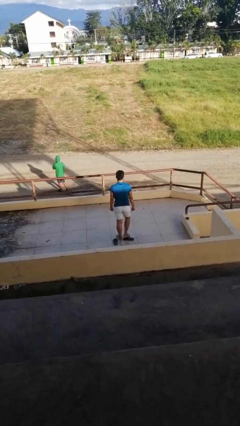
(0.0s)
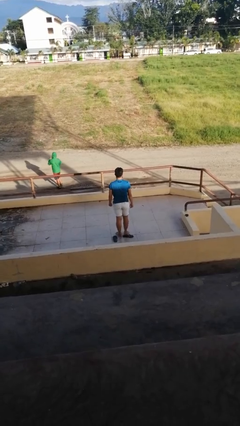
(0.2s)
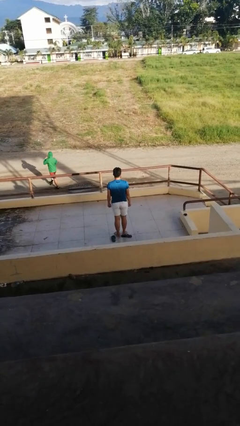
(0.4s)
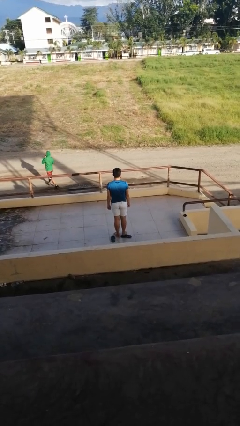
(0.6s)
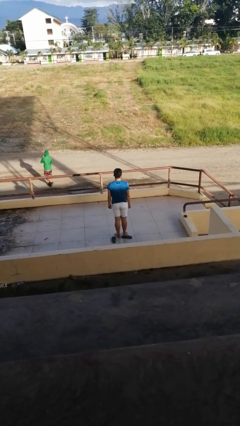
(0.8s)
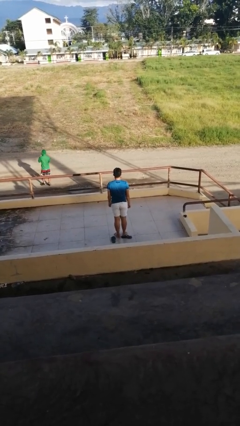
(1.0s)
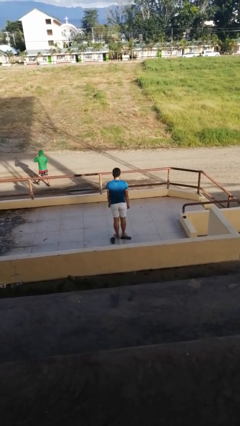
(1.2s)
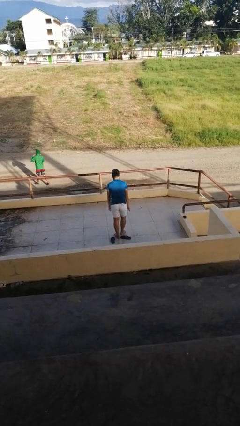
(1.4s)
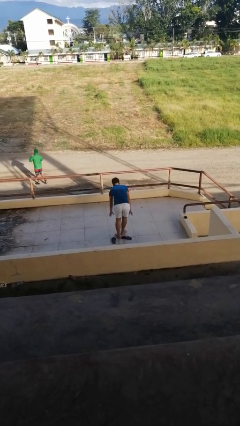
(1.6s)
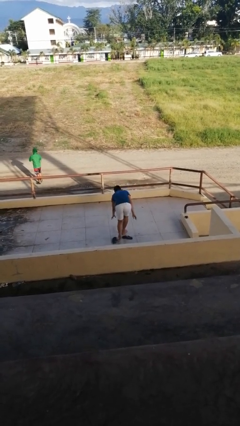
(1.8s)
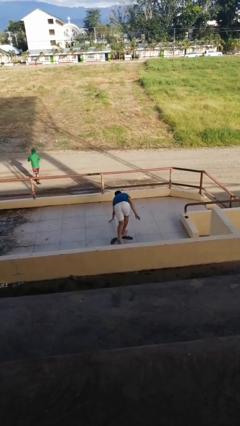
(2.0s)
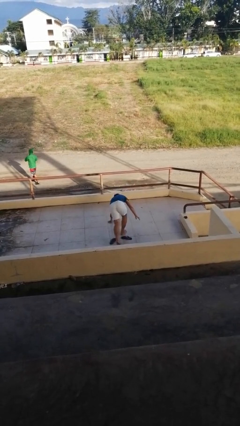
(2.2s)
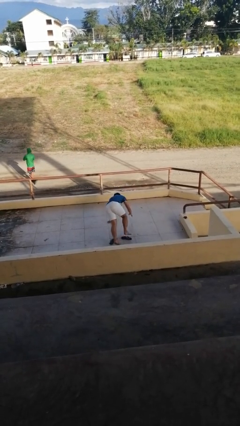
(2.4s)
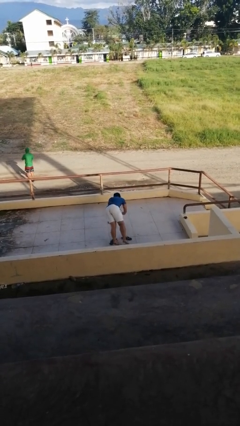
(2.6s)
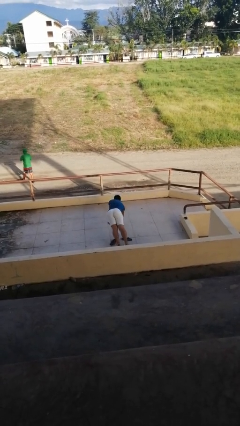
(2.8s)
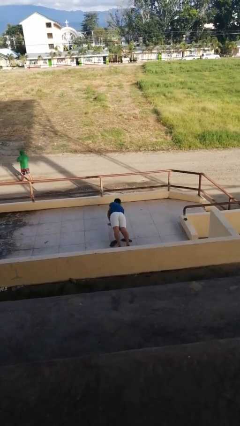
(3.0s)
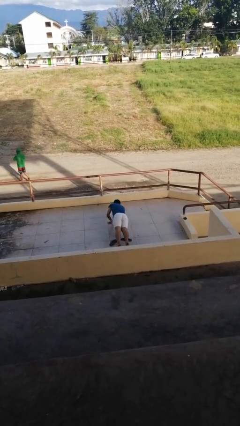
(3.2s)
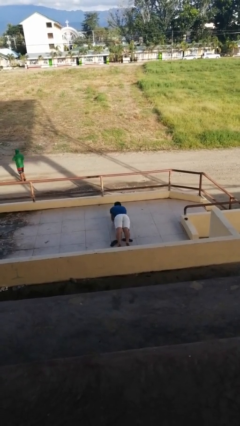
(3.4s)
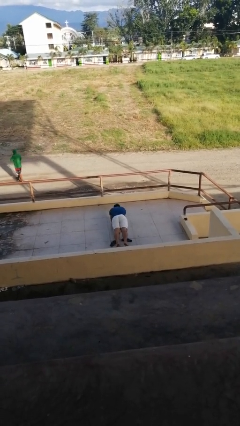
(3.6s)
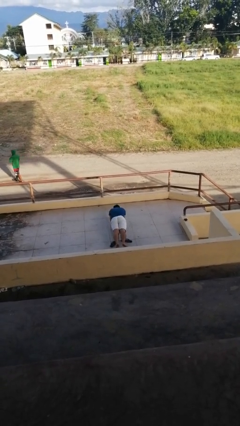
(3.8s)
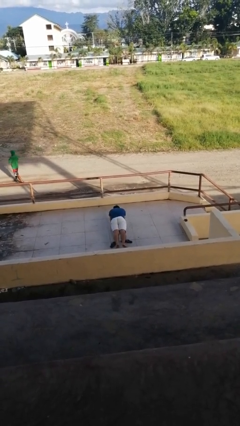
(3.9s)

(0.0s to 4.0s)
person exercises with plank

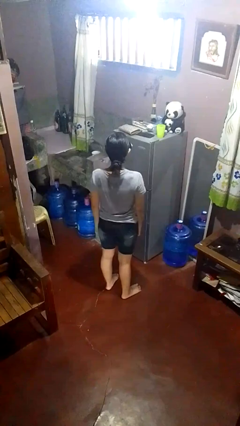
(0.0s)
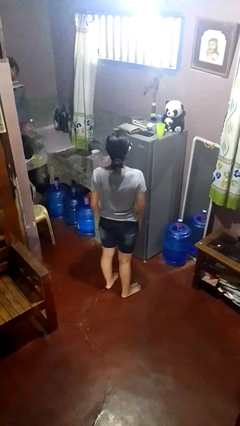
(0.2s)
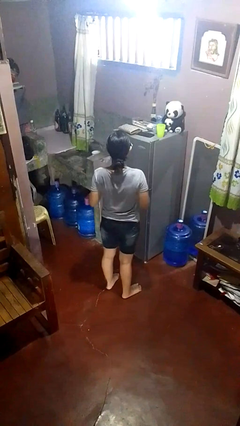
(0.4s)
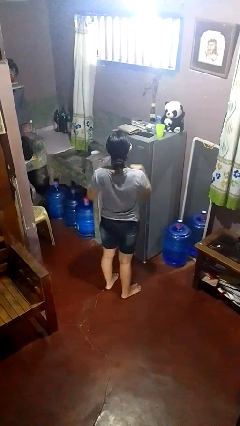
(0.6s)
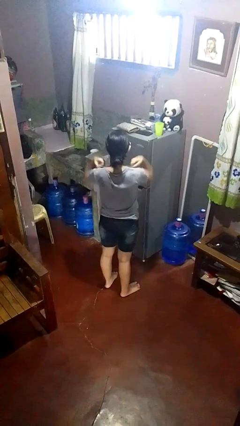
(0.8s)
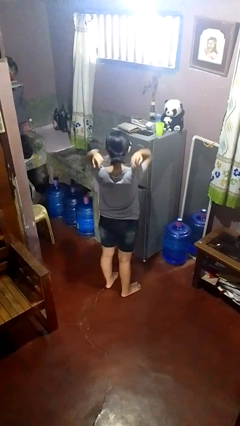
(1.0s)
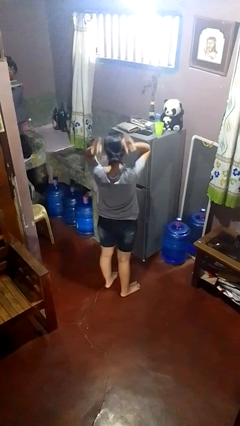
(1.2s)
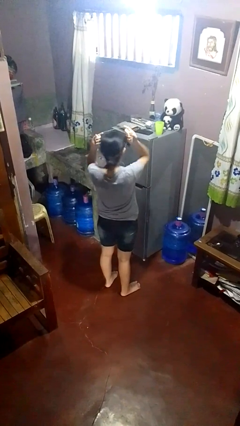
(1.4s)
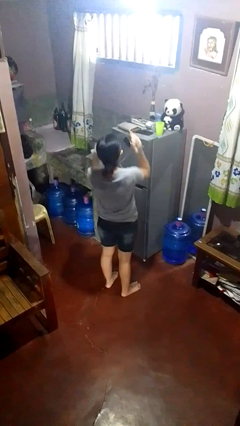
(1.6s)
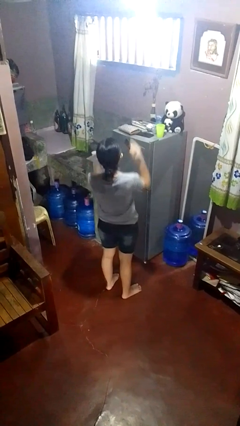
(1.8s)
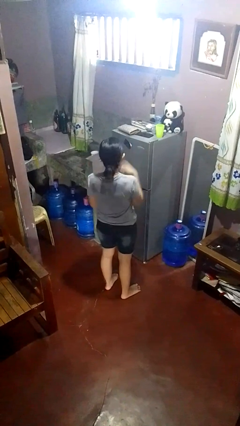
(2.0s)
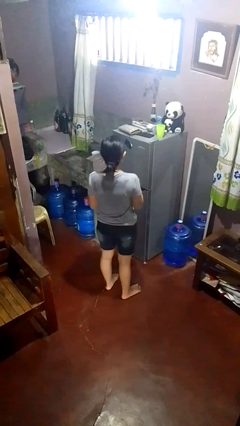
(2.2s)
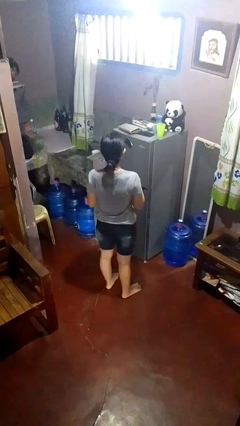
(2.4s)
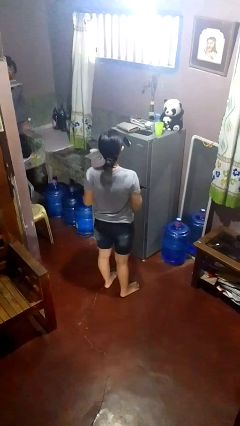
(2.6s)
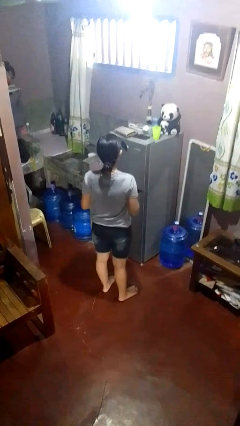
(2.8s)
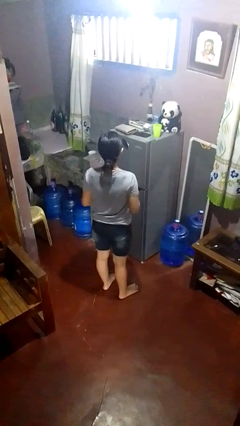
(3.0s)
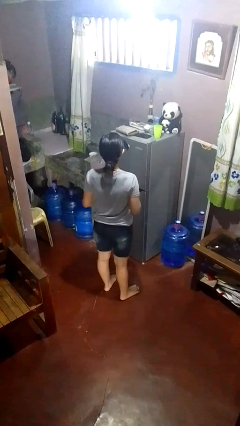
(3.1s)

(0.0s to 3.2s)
person takes off necklace

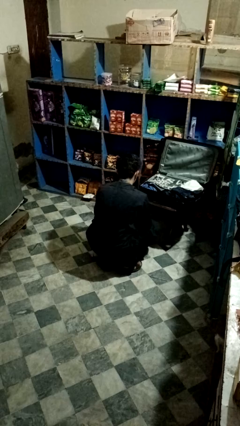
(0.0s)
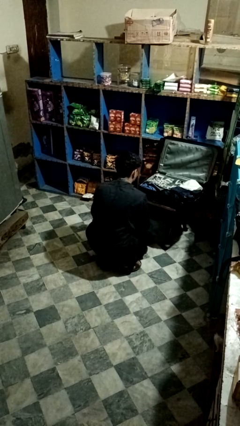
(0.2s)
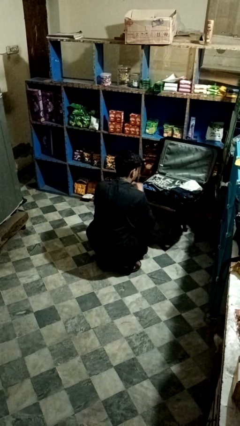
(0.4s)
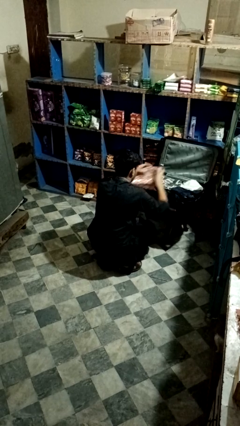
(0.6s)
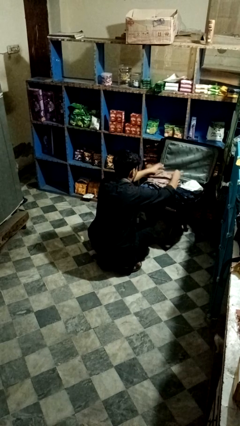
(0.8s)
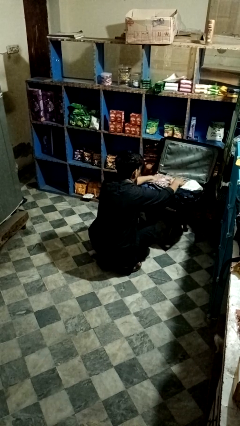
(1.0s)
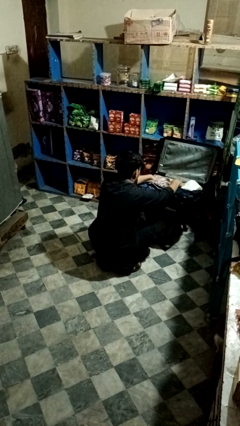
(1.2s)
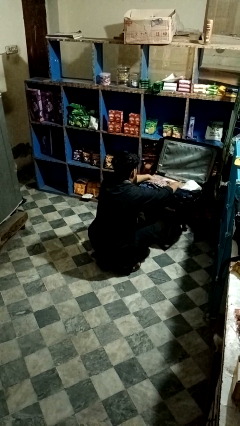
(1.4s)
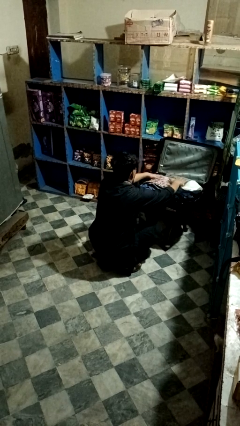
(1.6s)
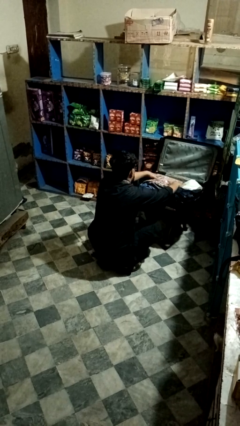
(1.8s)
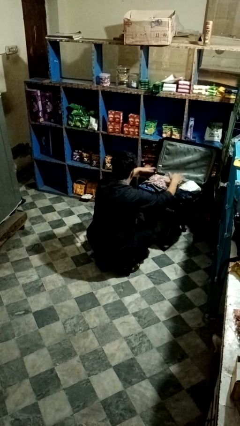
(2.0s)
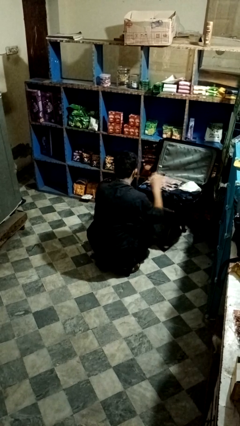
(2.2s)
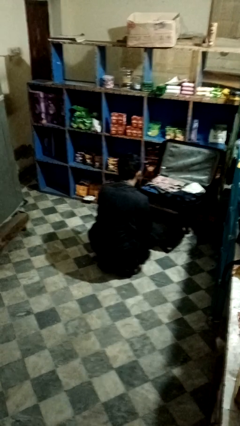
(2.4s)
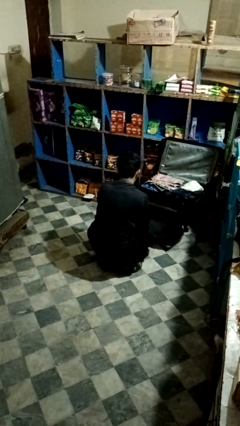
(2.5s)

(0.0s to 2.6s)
person loads clothes into suitcase

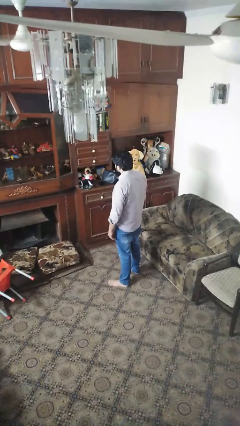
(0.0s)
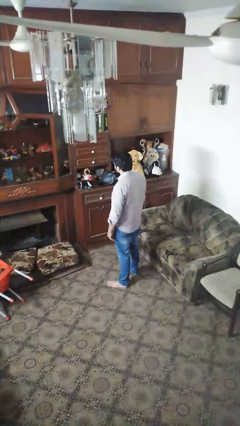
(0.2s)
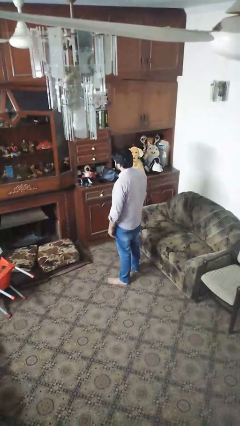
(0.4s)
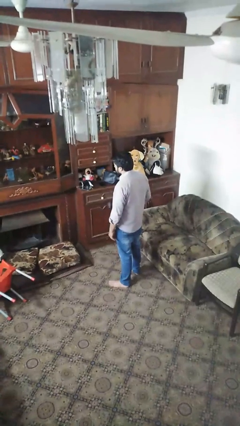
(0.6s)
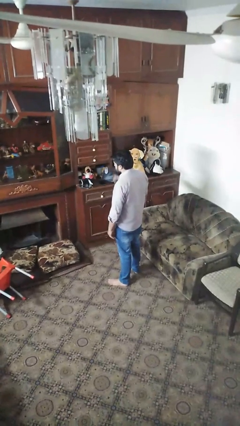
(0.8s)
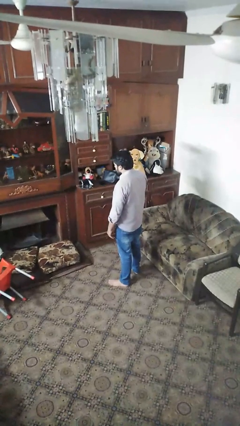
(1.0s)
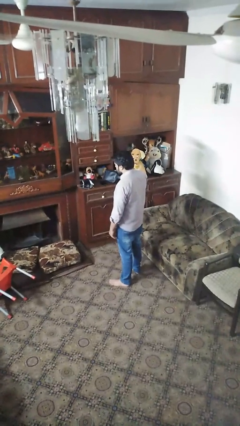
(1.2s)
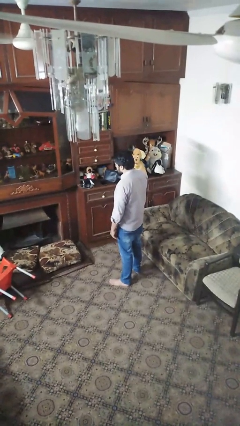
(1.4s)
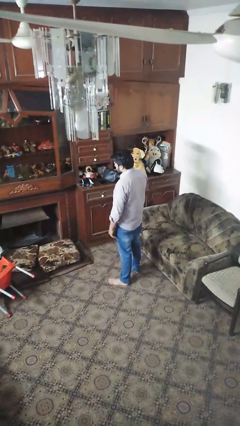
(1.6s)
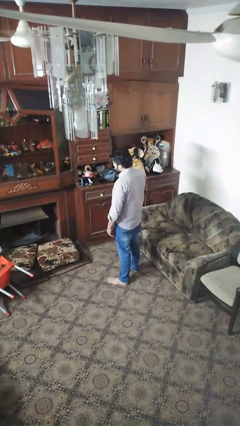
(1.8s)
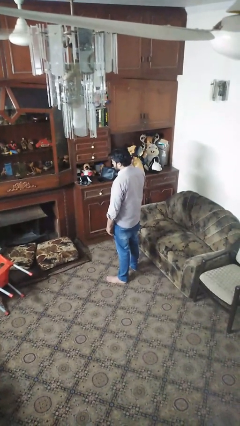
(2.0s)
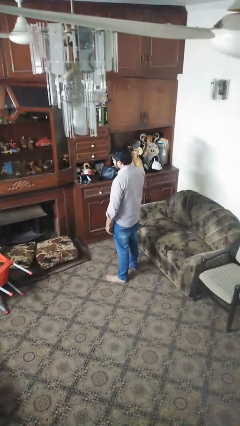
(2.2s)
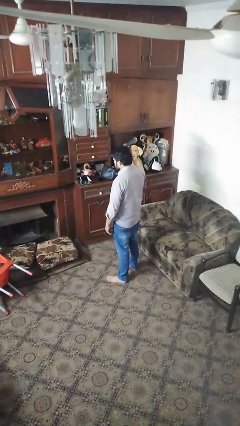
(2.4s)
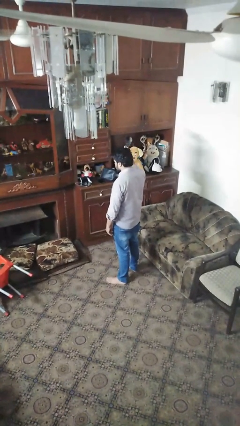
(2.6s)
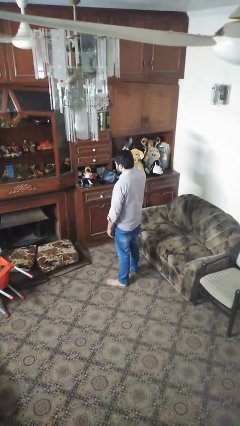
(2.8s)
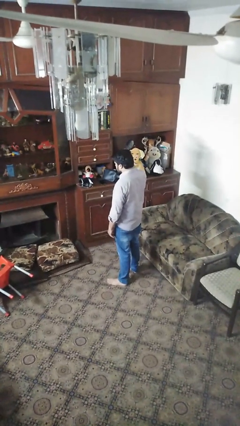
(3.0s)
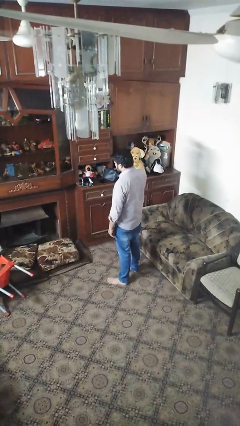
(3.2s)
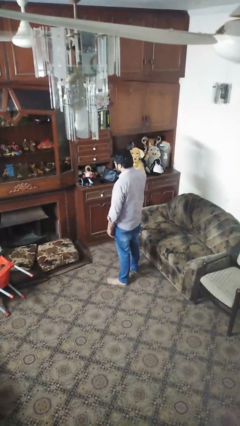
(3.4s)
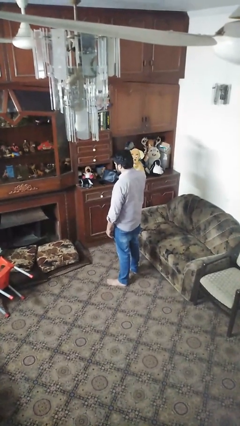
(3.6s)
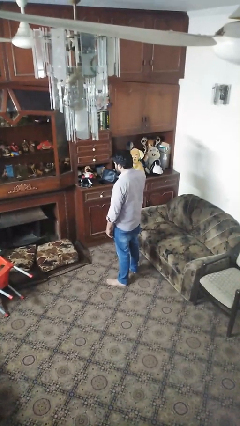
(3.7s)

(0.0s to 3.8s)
person dries hair with hairdryer

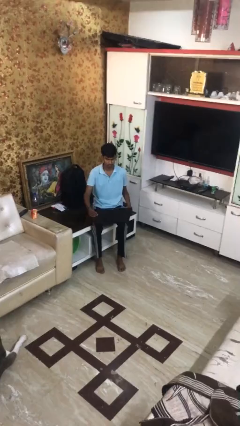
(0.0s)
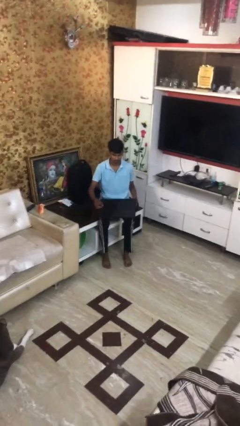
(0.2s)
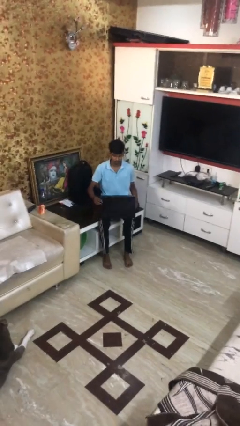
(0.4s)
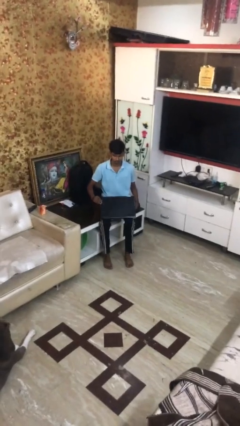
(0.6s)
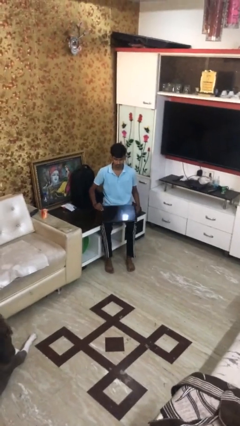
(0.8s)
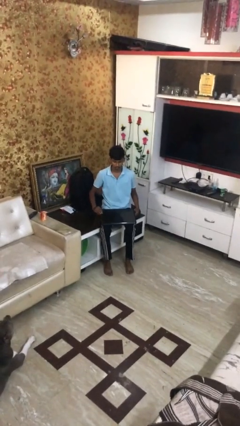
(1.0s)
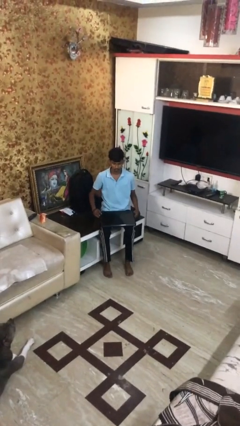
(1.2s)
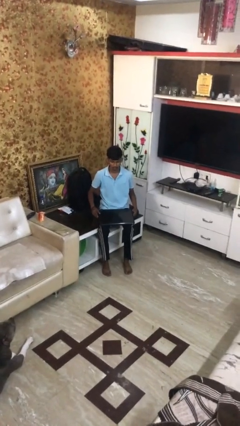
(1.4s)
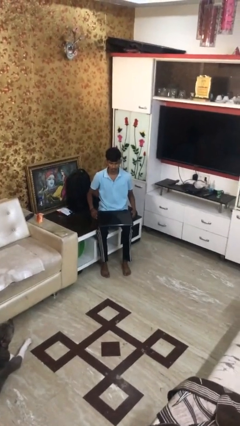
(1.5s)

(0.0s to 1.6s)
person closes laptop

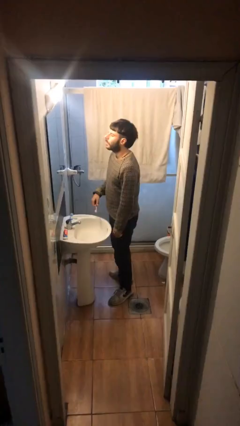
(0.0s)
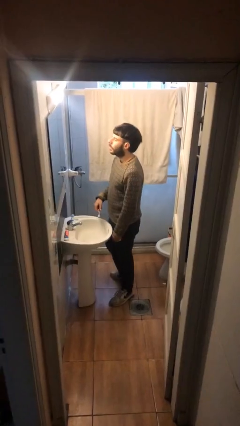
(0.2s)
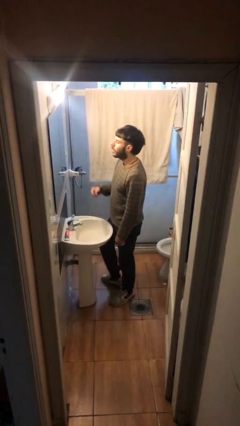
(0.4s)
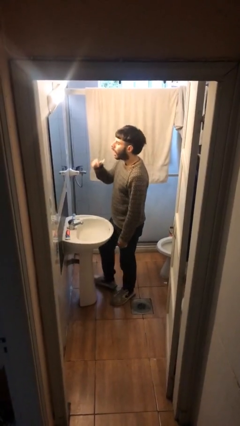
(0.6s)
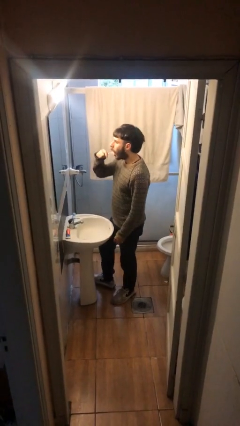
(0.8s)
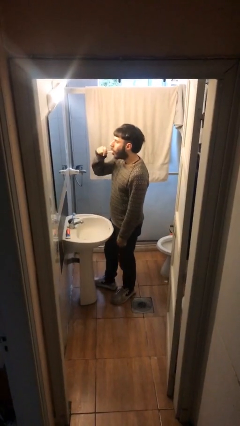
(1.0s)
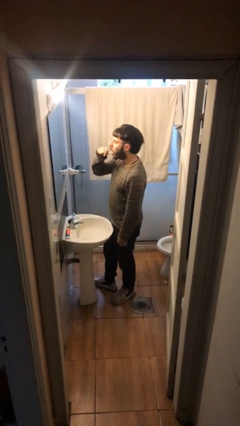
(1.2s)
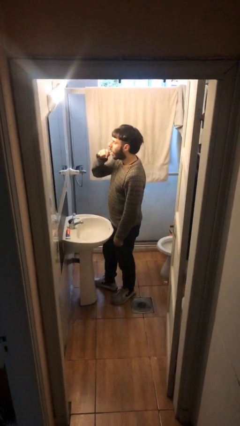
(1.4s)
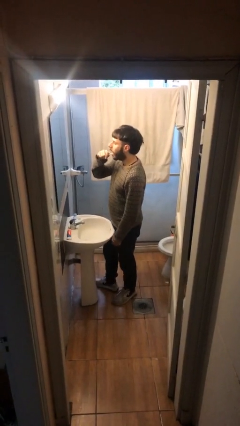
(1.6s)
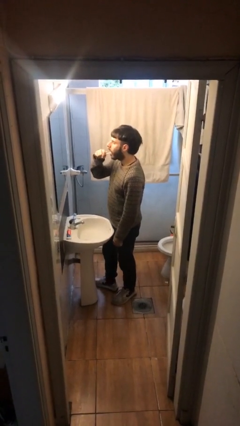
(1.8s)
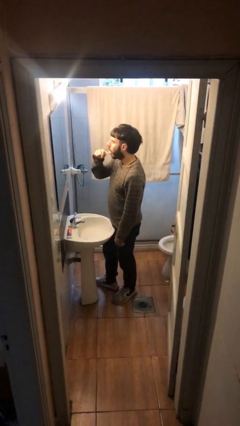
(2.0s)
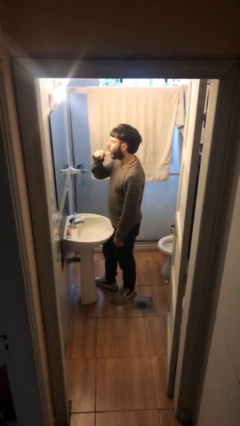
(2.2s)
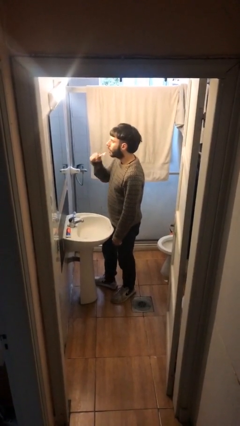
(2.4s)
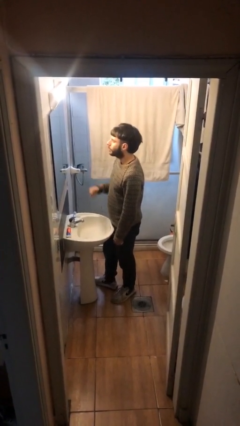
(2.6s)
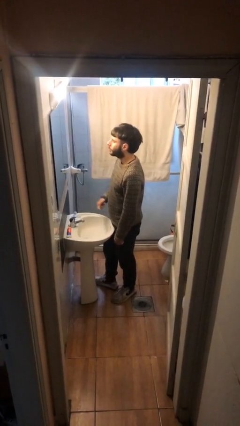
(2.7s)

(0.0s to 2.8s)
person brushes teeth
